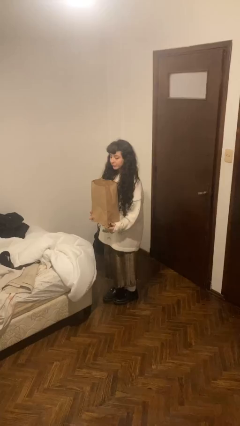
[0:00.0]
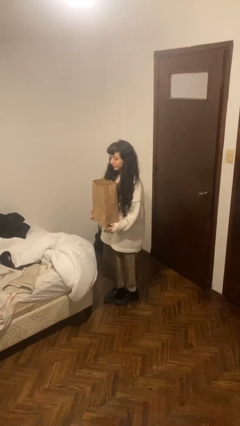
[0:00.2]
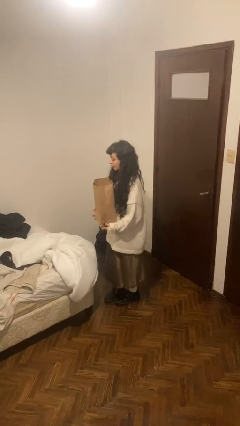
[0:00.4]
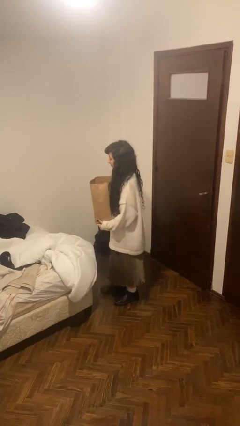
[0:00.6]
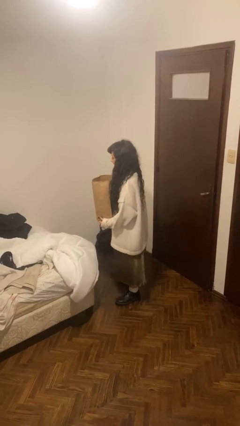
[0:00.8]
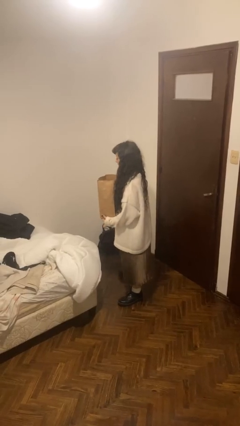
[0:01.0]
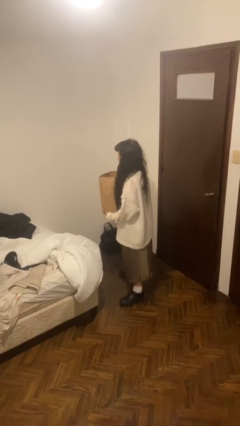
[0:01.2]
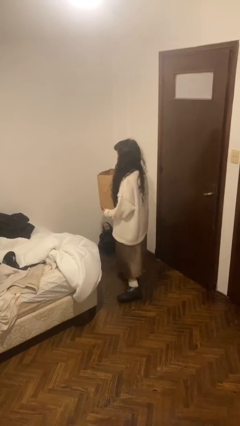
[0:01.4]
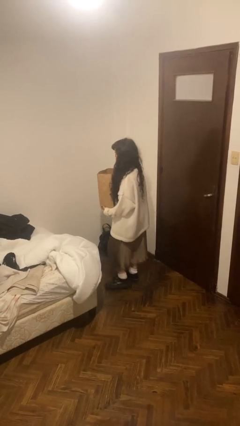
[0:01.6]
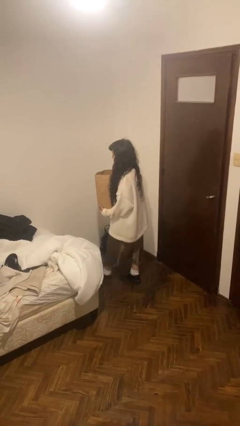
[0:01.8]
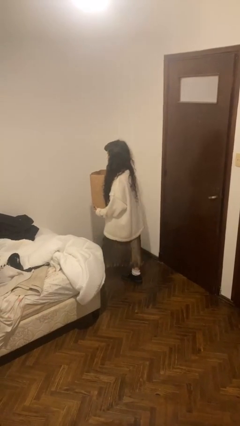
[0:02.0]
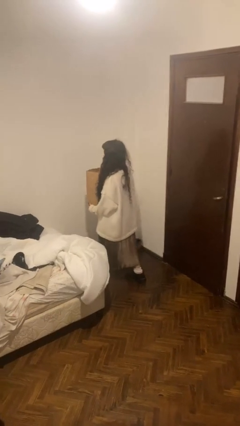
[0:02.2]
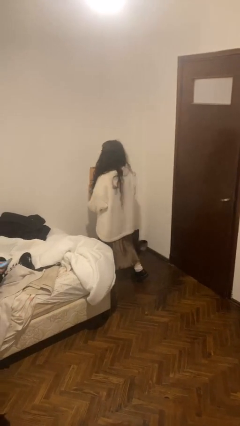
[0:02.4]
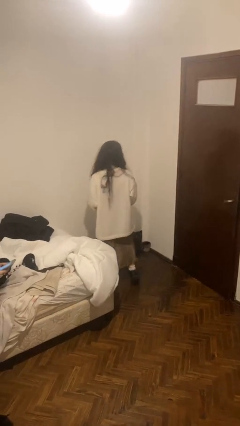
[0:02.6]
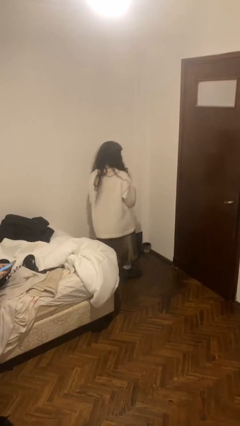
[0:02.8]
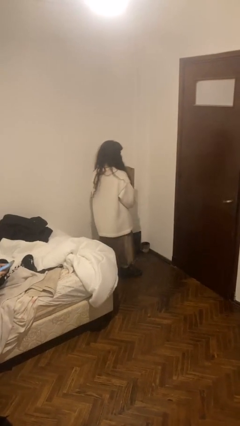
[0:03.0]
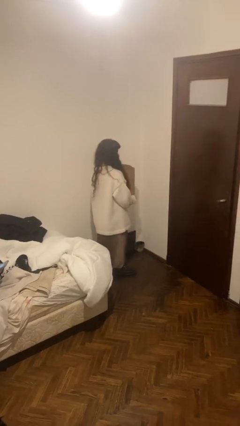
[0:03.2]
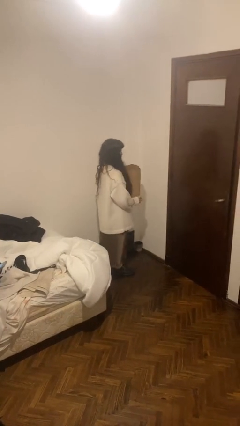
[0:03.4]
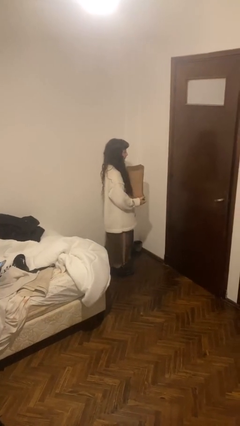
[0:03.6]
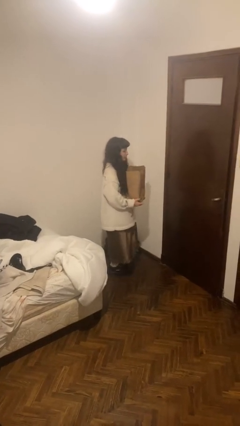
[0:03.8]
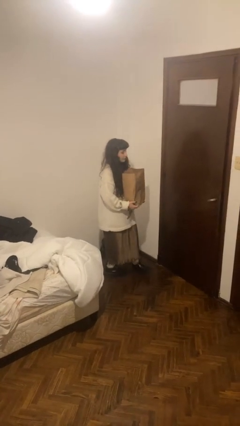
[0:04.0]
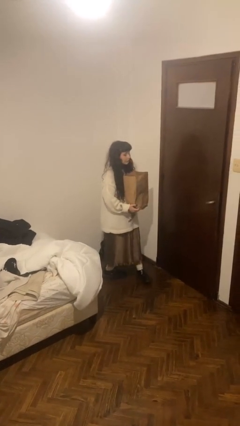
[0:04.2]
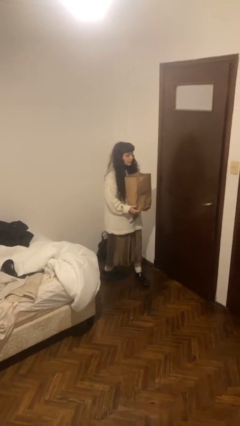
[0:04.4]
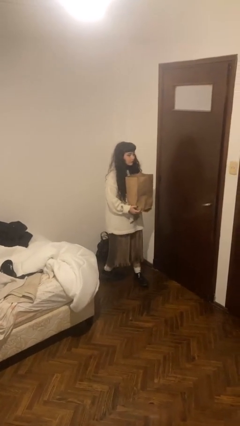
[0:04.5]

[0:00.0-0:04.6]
person carries groceries

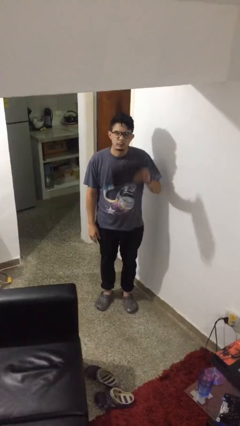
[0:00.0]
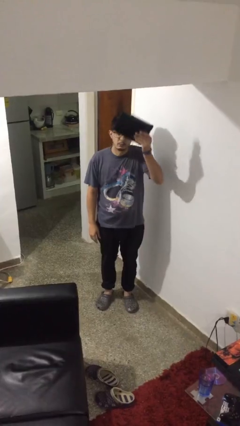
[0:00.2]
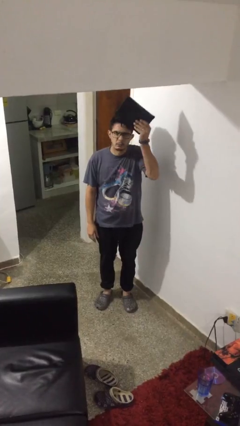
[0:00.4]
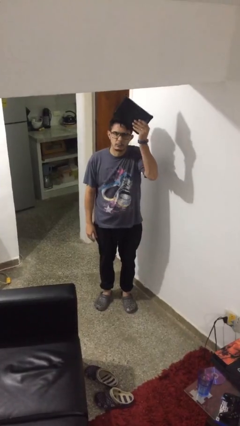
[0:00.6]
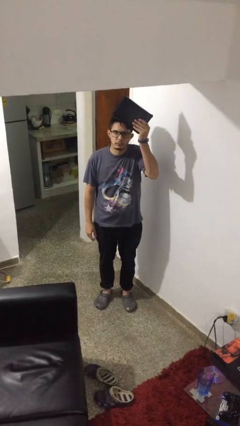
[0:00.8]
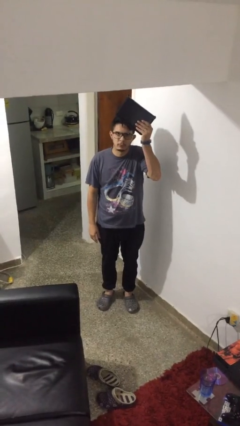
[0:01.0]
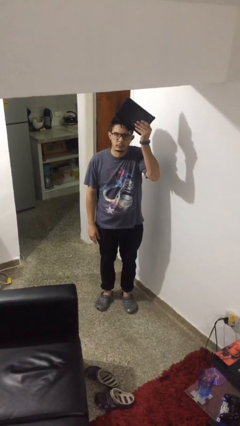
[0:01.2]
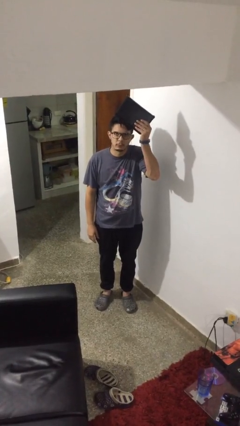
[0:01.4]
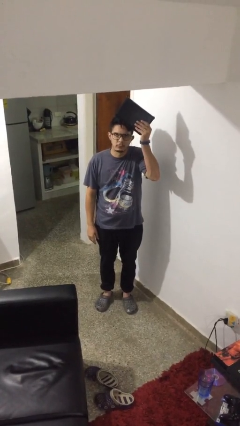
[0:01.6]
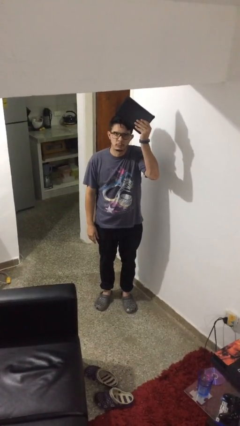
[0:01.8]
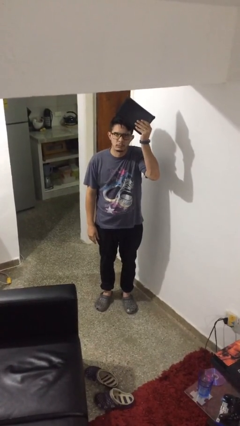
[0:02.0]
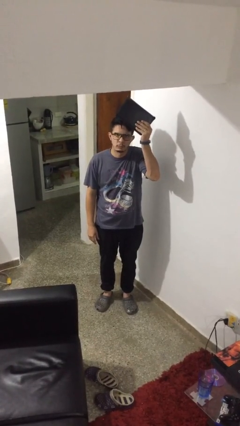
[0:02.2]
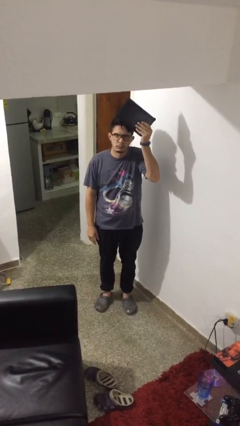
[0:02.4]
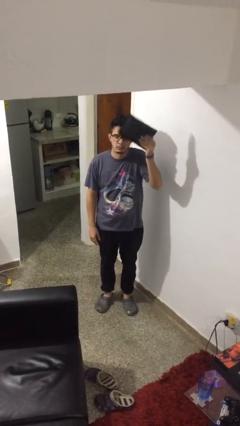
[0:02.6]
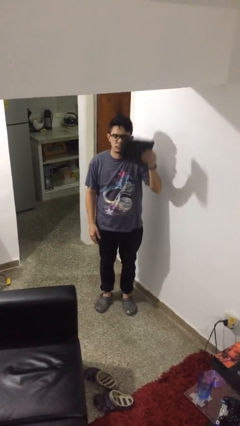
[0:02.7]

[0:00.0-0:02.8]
person holds object above head

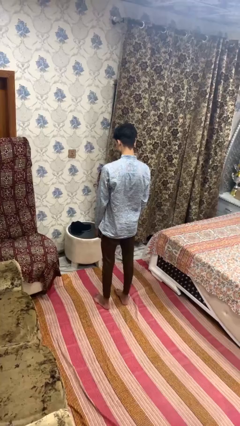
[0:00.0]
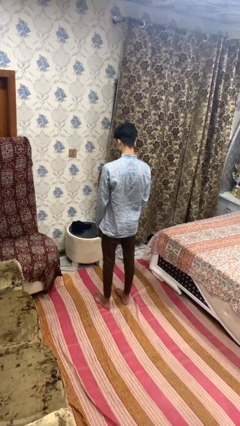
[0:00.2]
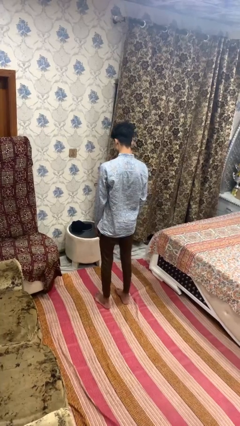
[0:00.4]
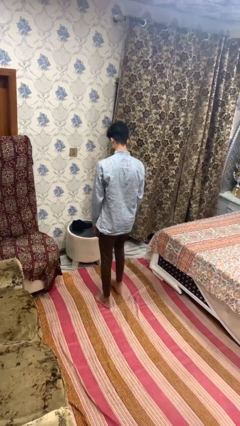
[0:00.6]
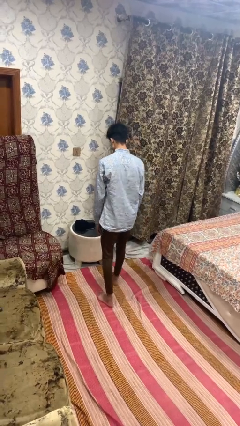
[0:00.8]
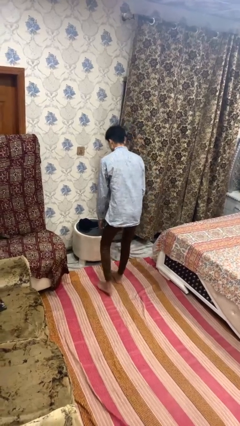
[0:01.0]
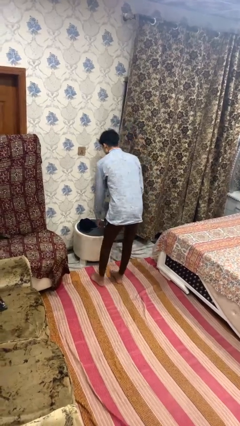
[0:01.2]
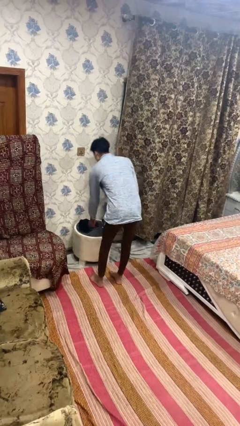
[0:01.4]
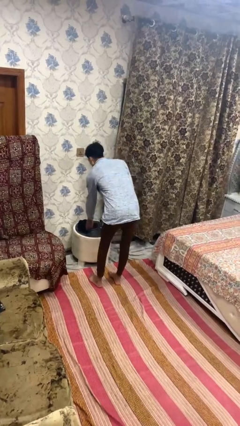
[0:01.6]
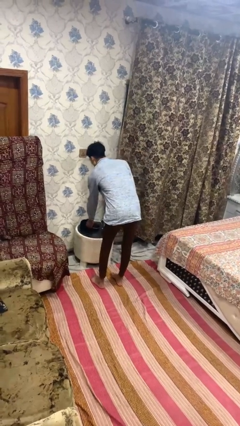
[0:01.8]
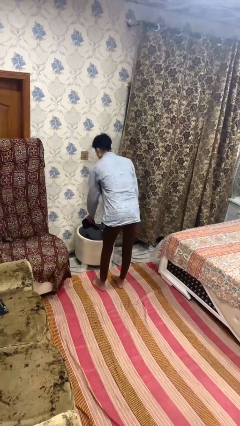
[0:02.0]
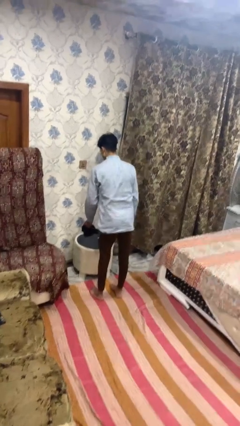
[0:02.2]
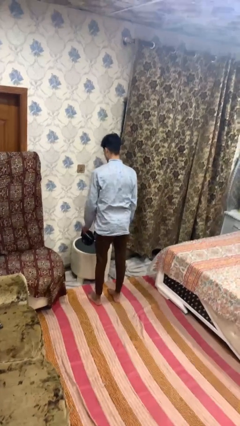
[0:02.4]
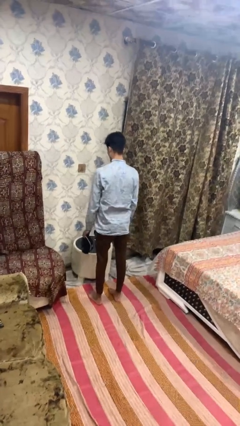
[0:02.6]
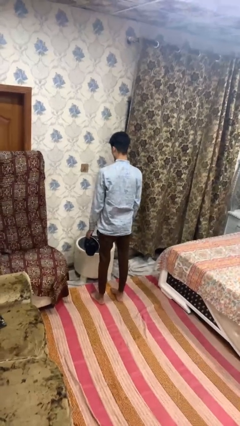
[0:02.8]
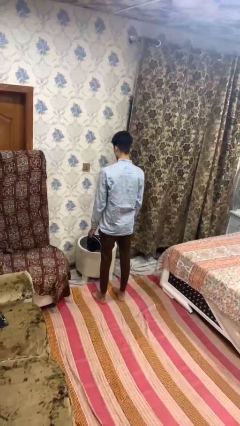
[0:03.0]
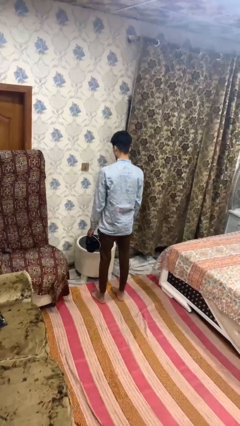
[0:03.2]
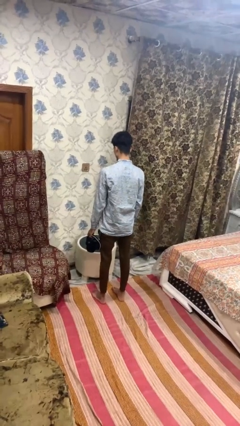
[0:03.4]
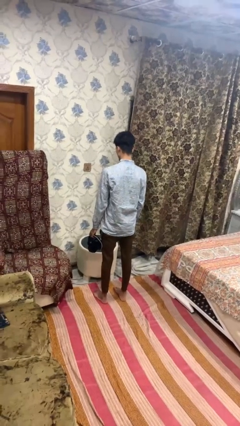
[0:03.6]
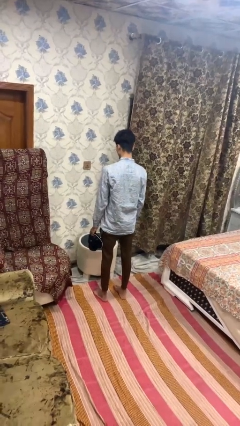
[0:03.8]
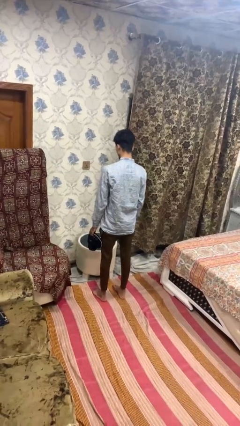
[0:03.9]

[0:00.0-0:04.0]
person picks up object from table

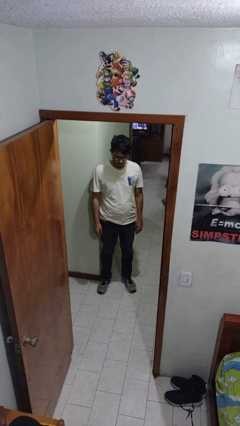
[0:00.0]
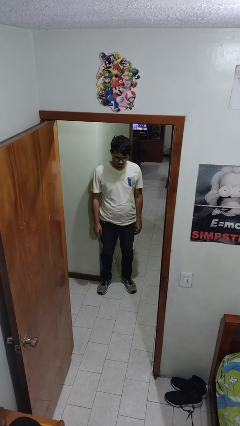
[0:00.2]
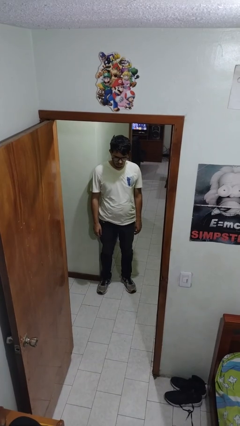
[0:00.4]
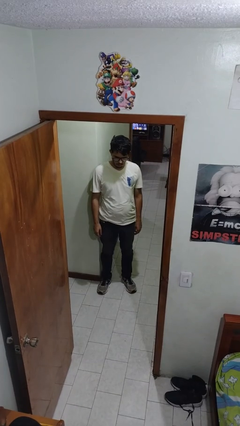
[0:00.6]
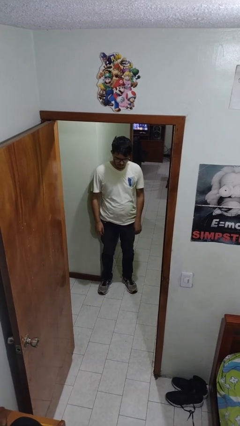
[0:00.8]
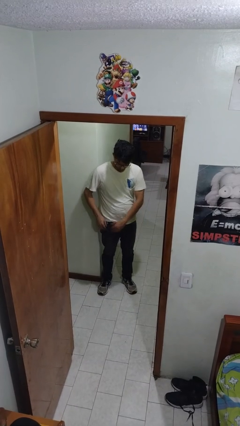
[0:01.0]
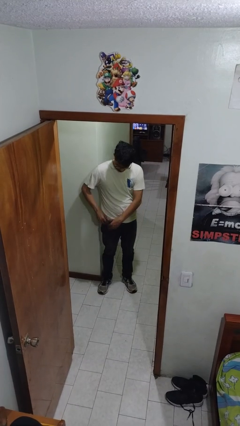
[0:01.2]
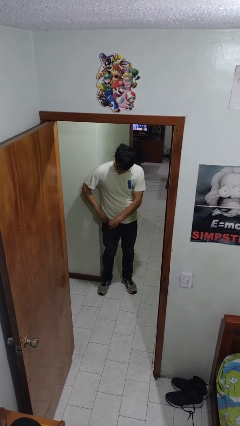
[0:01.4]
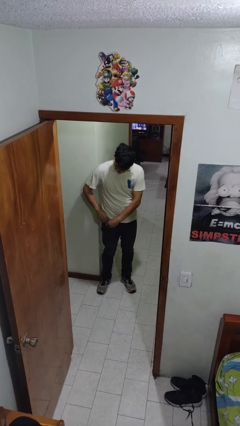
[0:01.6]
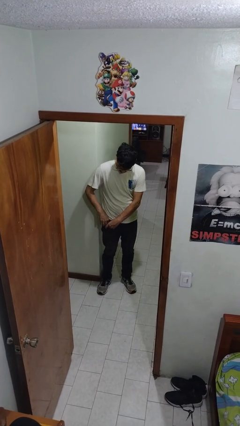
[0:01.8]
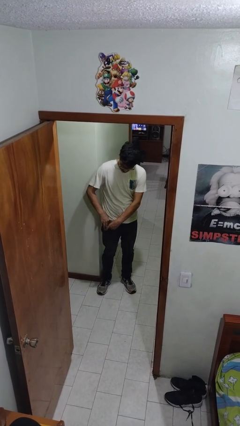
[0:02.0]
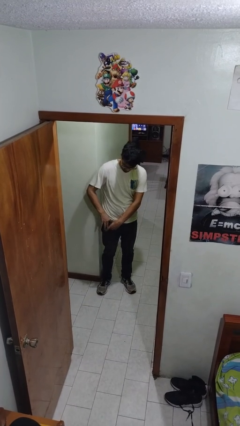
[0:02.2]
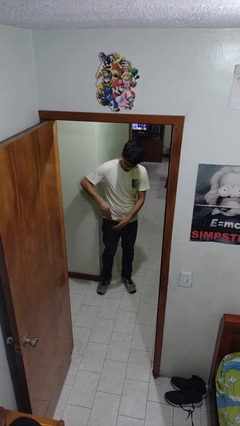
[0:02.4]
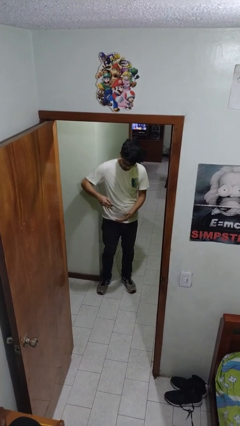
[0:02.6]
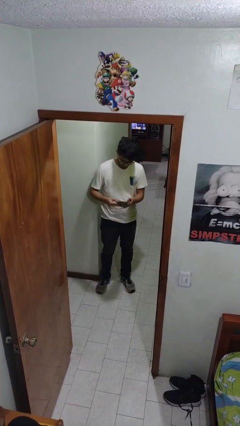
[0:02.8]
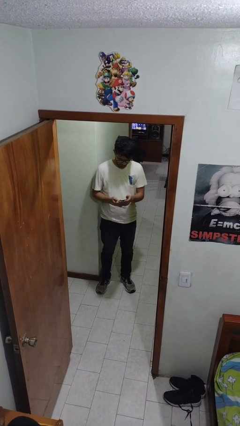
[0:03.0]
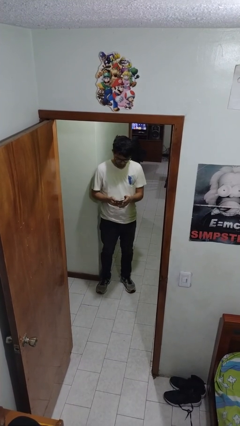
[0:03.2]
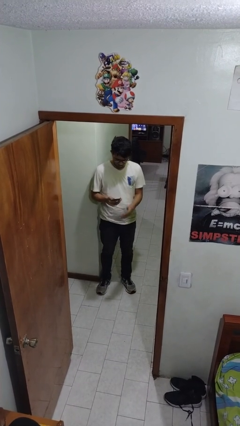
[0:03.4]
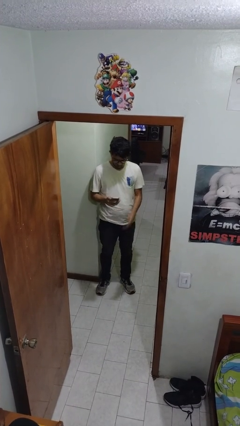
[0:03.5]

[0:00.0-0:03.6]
person takes phone from pocket

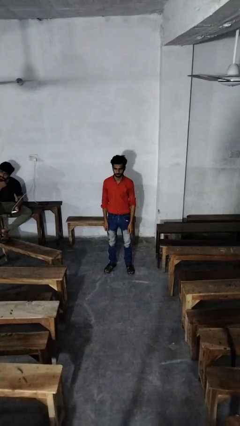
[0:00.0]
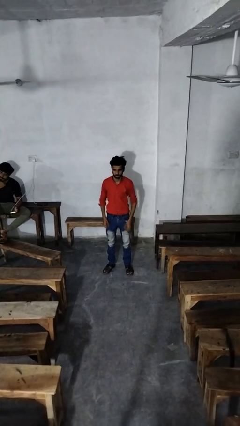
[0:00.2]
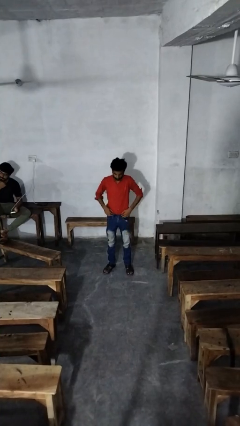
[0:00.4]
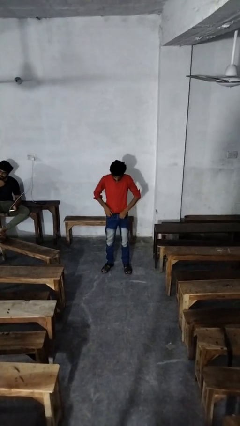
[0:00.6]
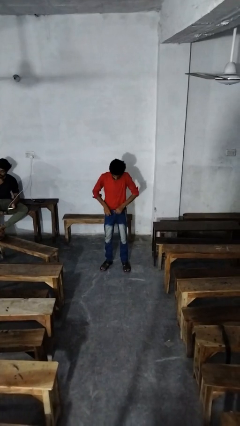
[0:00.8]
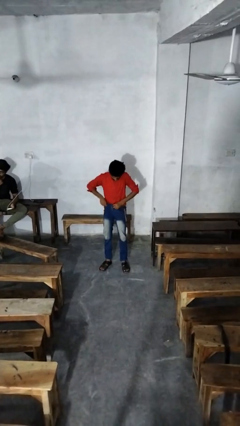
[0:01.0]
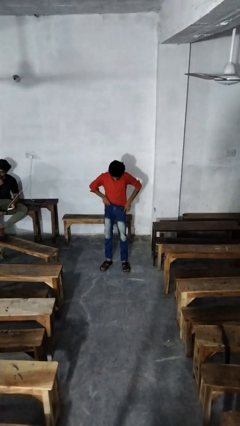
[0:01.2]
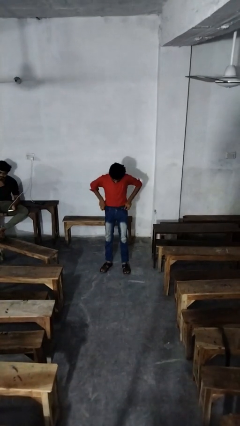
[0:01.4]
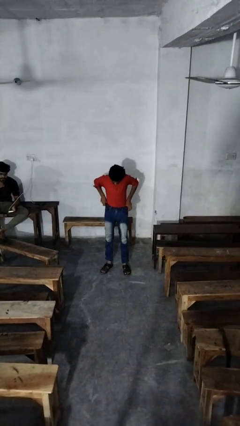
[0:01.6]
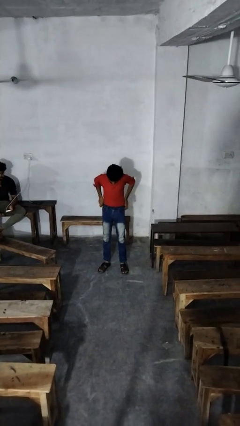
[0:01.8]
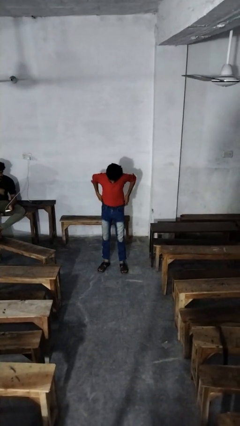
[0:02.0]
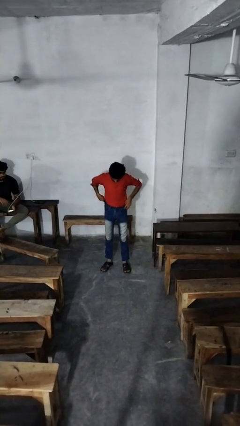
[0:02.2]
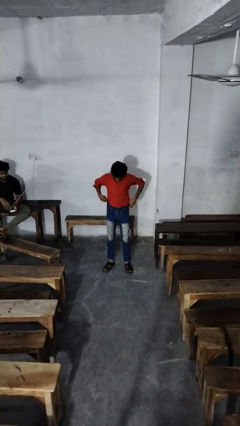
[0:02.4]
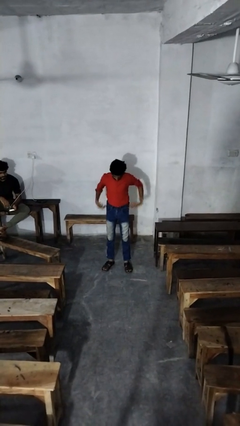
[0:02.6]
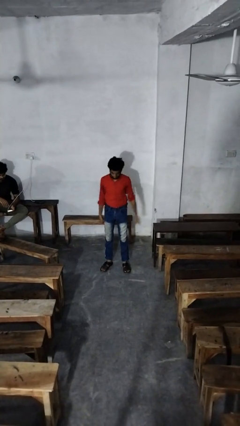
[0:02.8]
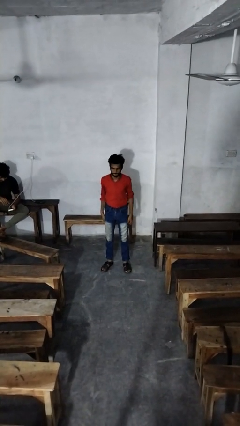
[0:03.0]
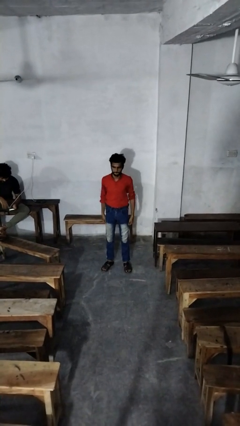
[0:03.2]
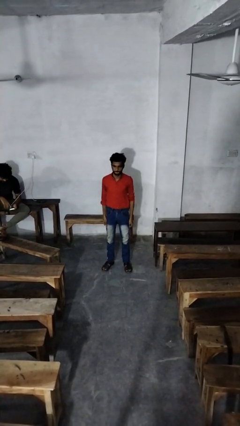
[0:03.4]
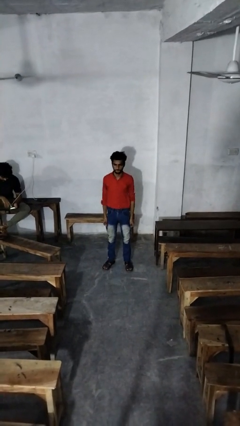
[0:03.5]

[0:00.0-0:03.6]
person hikes up pants
